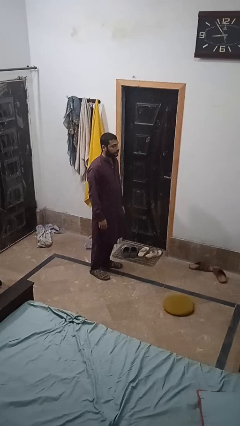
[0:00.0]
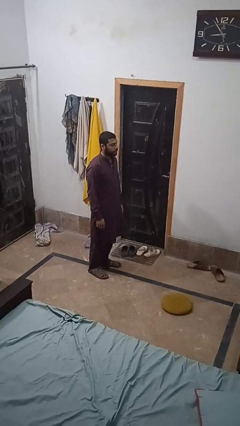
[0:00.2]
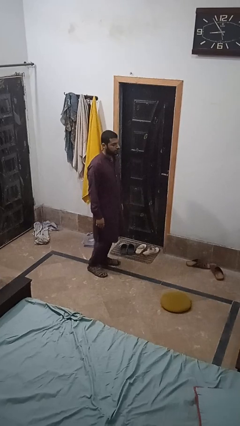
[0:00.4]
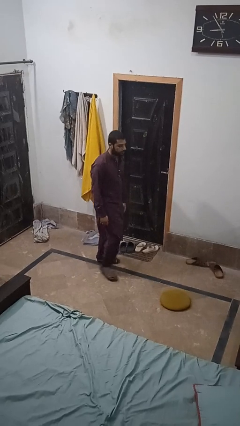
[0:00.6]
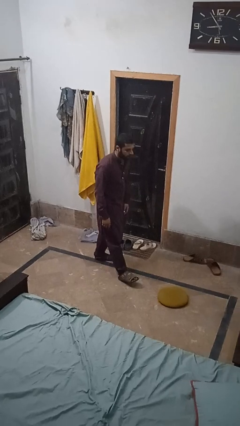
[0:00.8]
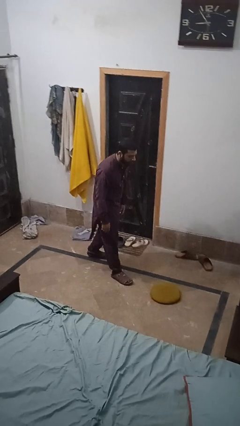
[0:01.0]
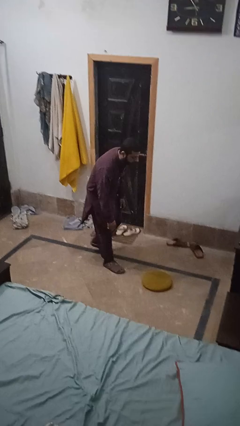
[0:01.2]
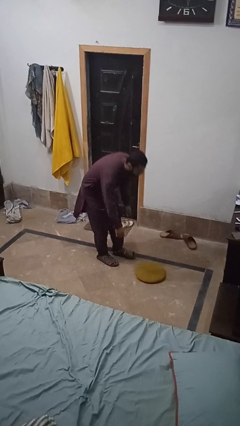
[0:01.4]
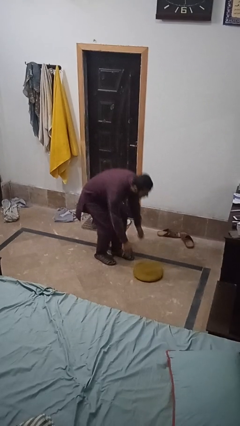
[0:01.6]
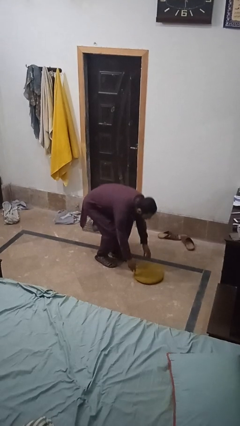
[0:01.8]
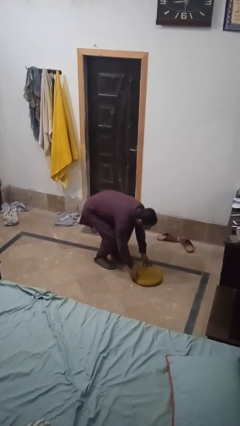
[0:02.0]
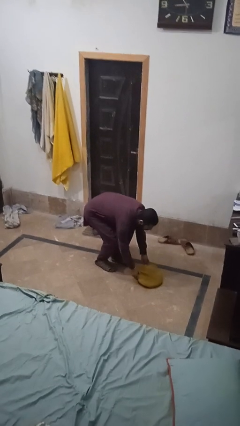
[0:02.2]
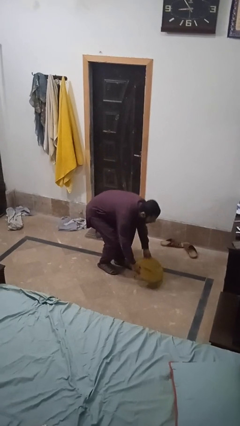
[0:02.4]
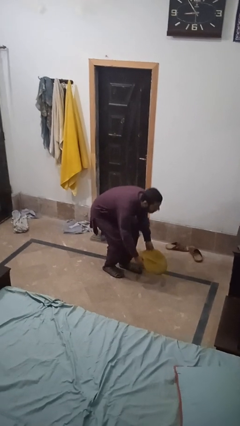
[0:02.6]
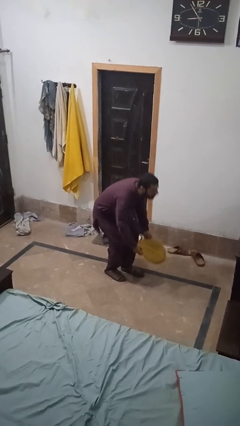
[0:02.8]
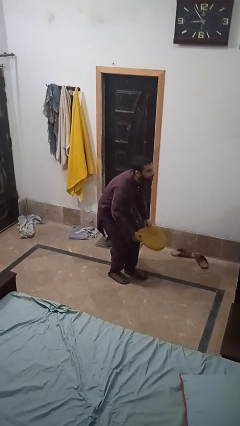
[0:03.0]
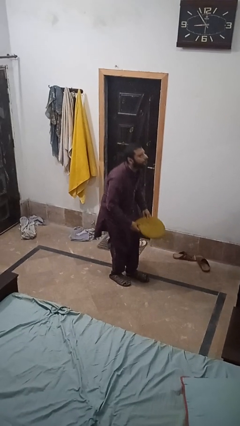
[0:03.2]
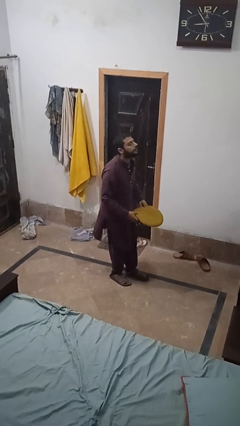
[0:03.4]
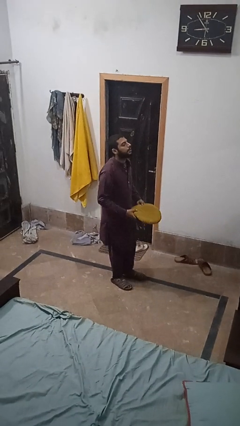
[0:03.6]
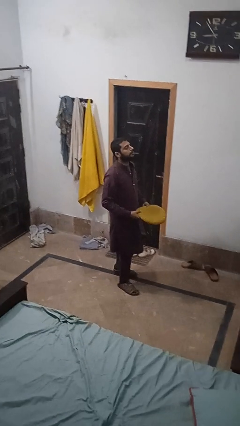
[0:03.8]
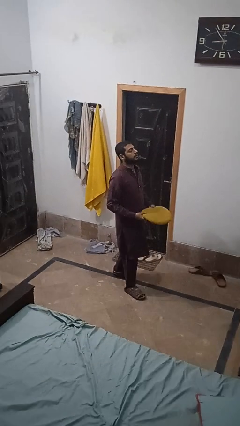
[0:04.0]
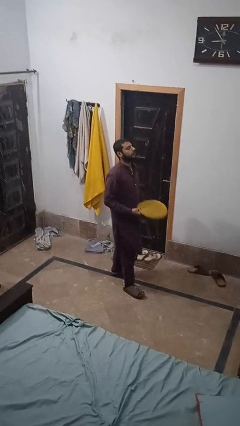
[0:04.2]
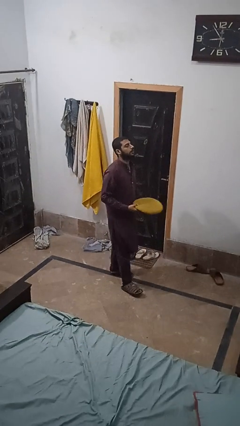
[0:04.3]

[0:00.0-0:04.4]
person picks up object from floor

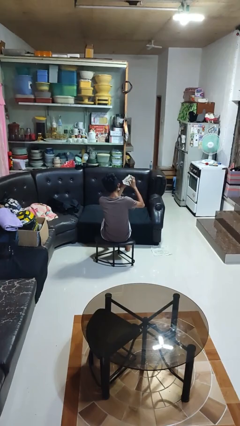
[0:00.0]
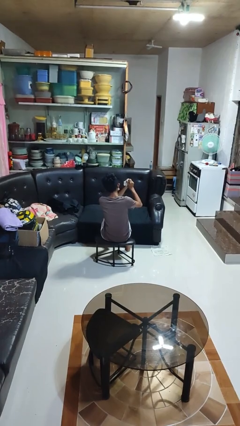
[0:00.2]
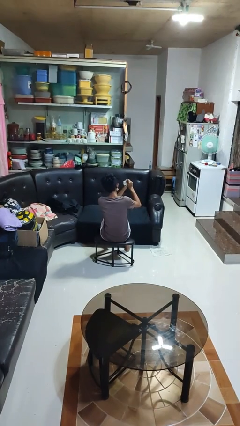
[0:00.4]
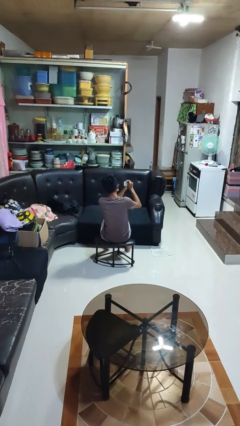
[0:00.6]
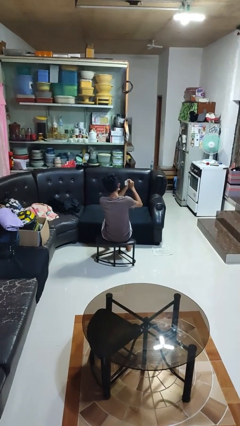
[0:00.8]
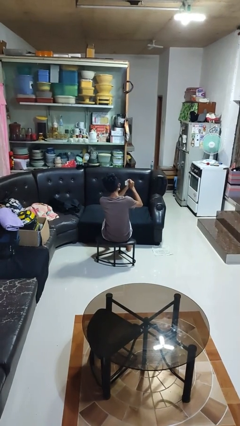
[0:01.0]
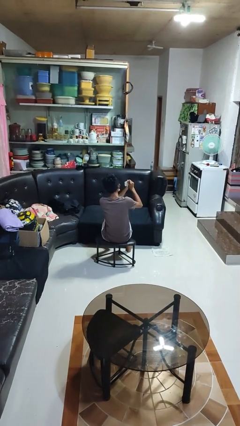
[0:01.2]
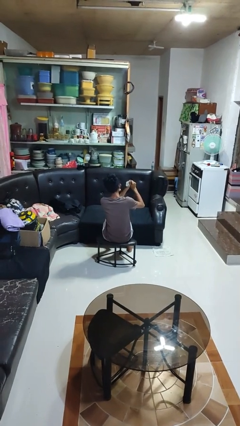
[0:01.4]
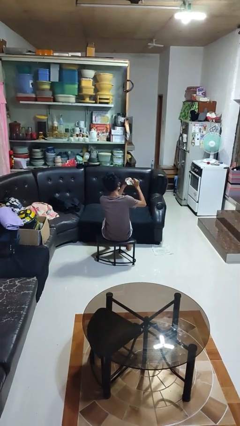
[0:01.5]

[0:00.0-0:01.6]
person crumples paper

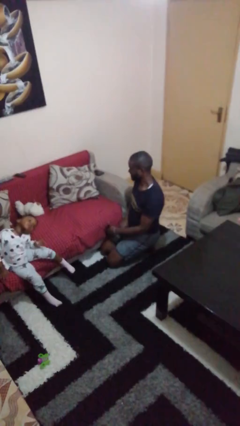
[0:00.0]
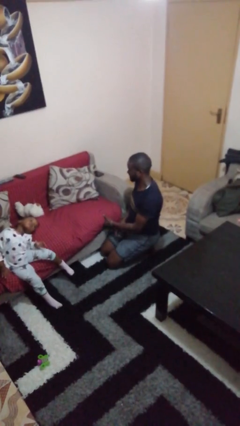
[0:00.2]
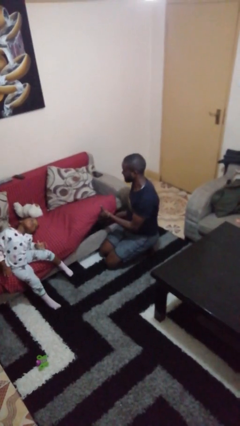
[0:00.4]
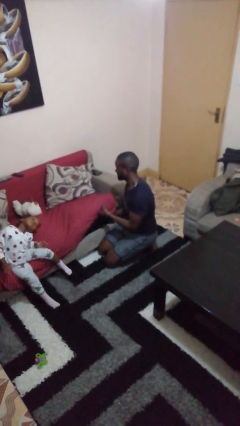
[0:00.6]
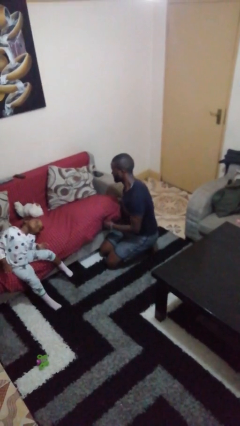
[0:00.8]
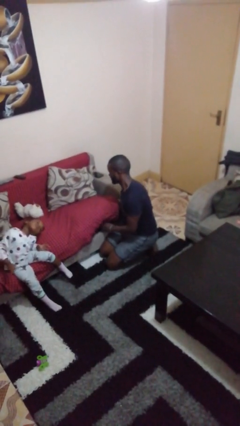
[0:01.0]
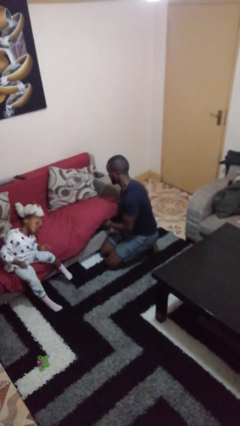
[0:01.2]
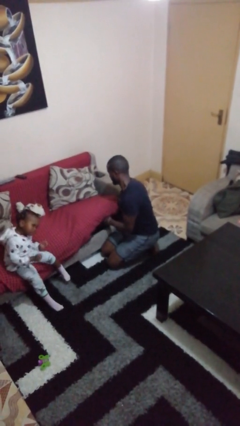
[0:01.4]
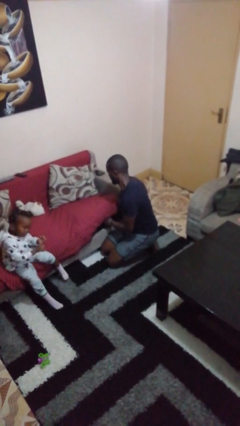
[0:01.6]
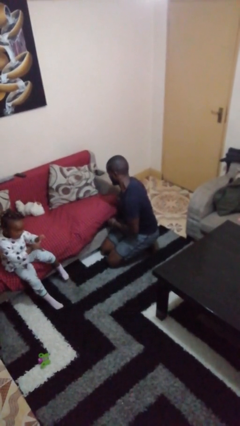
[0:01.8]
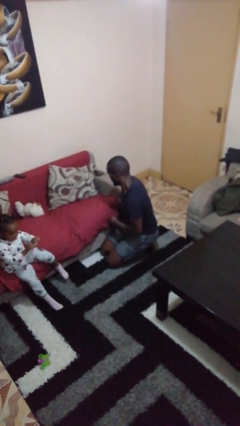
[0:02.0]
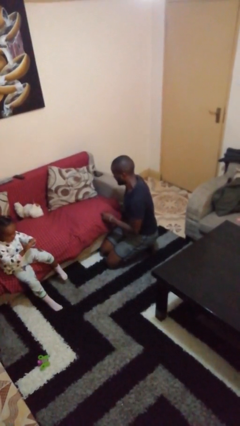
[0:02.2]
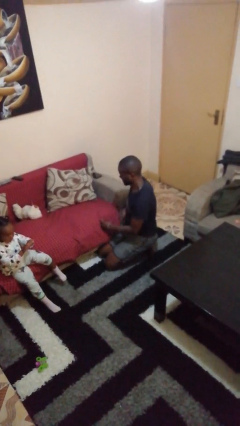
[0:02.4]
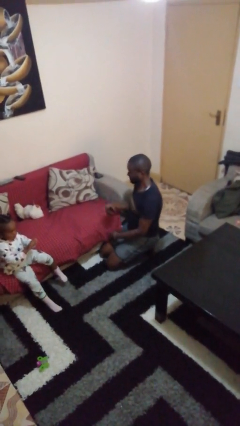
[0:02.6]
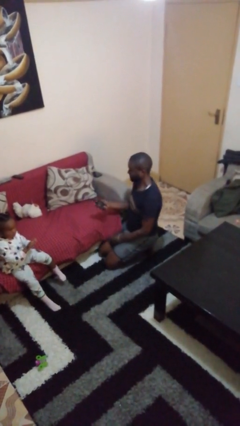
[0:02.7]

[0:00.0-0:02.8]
person searches in couch

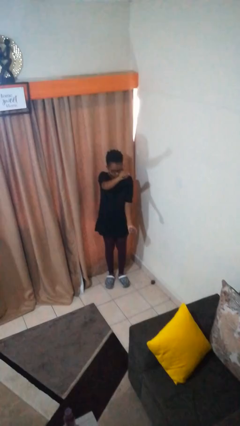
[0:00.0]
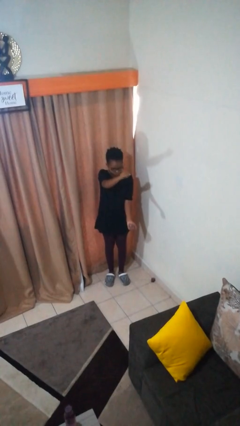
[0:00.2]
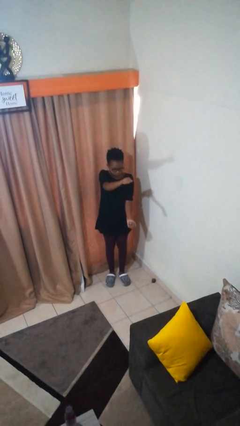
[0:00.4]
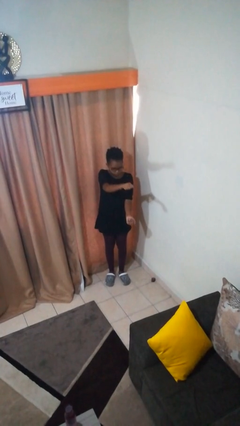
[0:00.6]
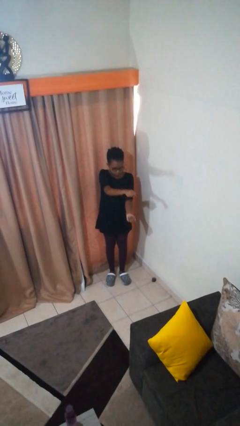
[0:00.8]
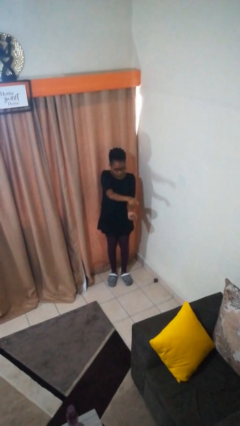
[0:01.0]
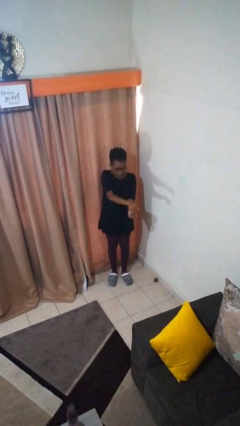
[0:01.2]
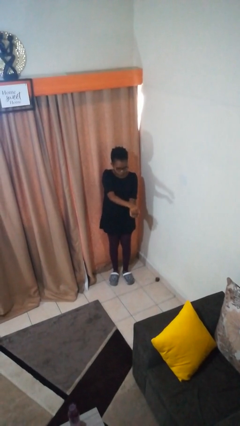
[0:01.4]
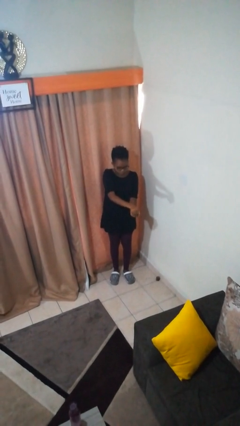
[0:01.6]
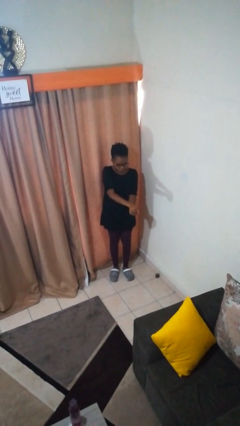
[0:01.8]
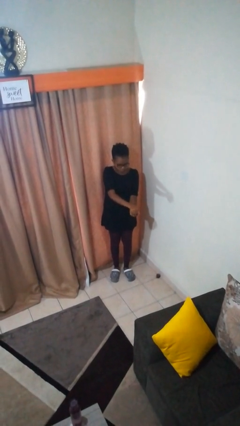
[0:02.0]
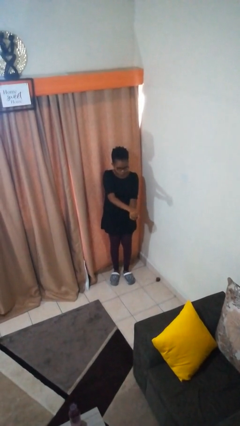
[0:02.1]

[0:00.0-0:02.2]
person gestures zoom out

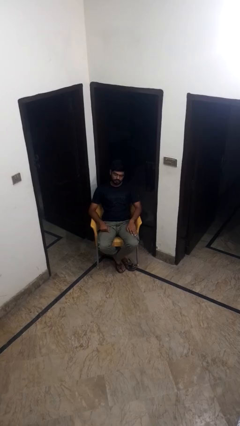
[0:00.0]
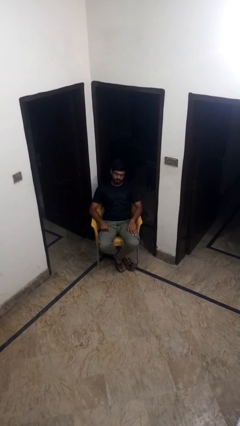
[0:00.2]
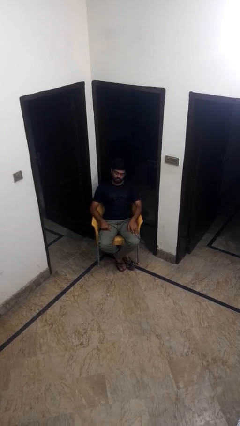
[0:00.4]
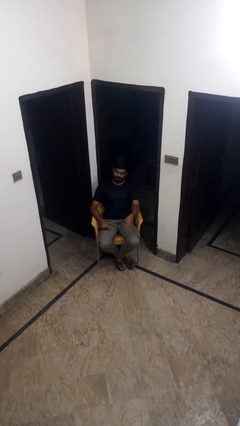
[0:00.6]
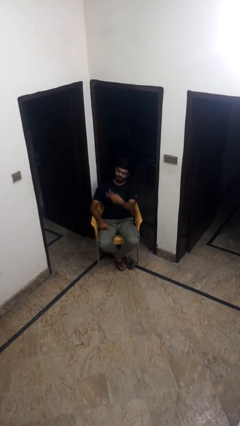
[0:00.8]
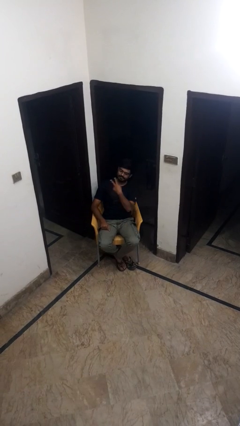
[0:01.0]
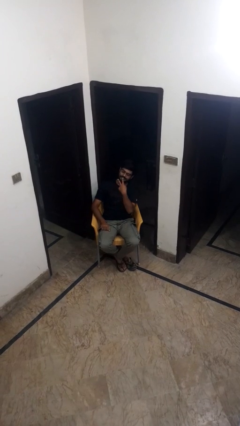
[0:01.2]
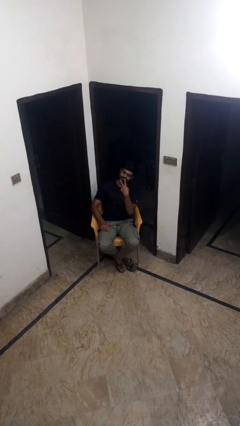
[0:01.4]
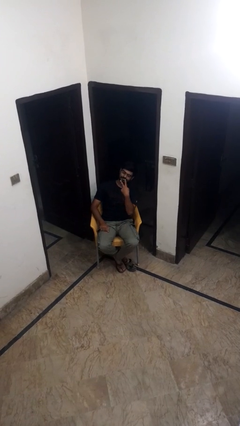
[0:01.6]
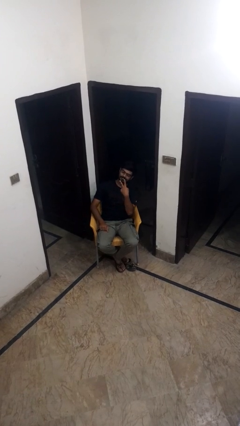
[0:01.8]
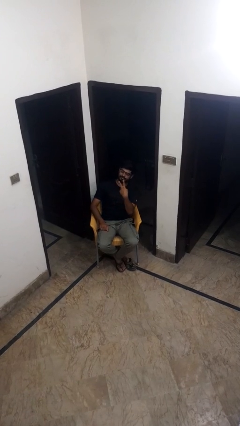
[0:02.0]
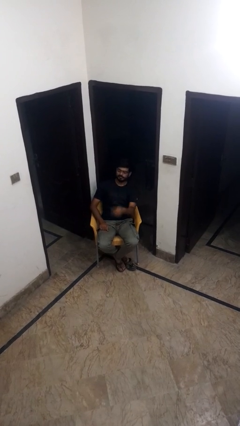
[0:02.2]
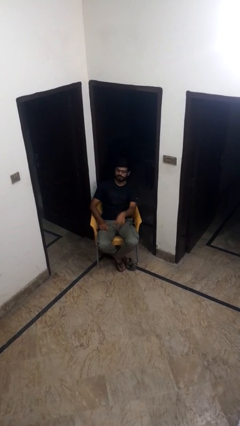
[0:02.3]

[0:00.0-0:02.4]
person gestures peace

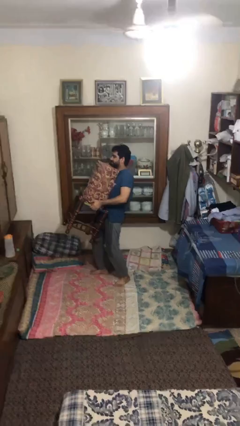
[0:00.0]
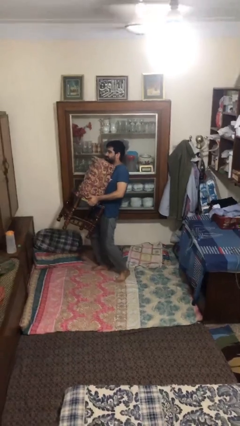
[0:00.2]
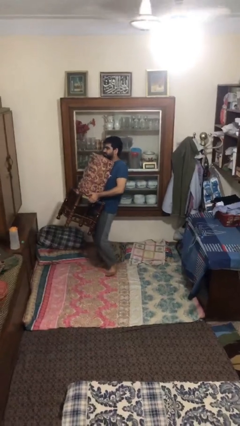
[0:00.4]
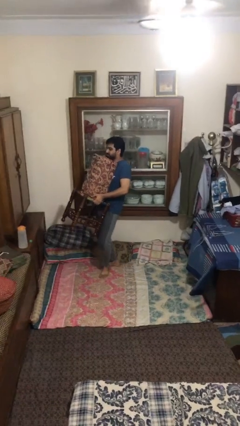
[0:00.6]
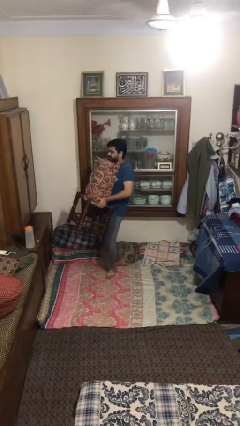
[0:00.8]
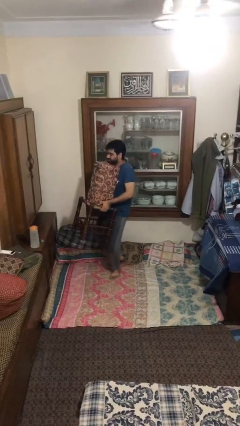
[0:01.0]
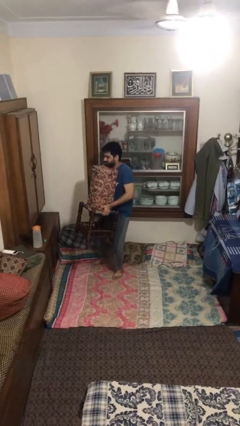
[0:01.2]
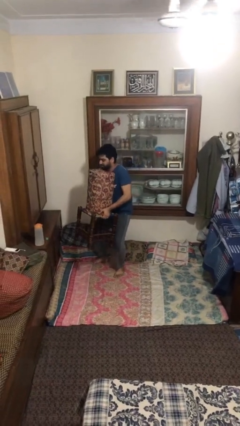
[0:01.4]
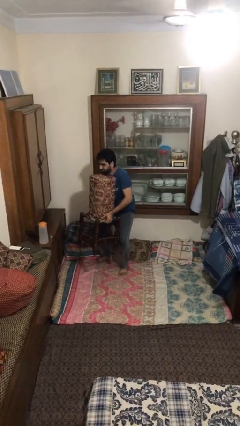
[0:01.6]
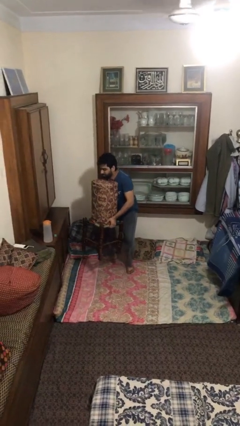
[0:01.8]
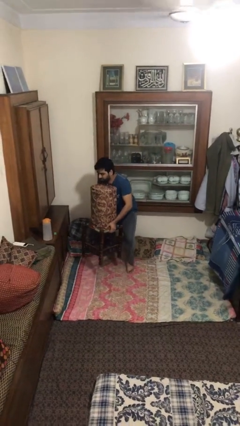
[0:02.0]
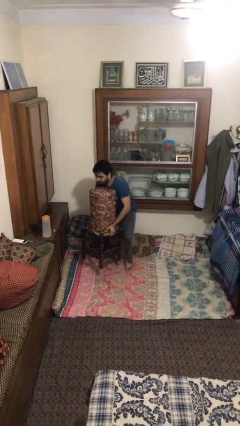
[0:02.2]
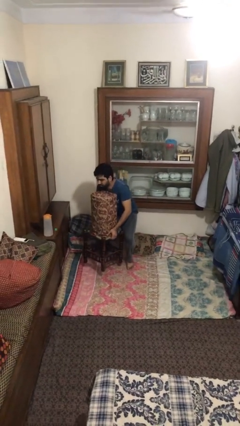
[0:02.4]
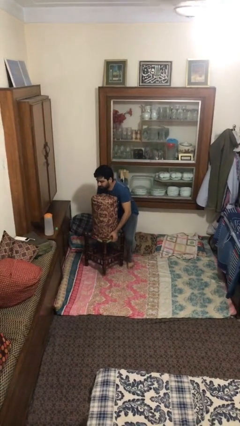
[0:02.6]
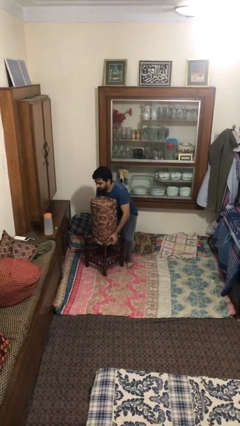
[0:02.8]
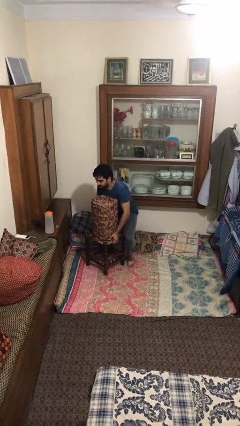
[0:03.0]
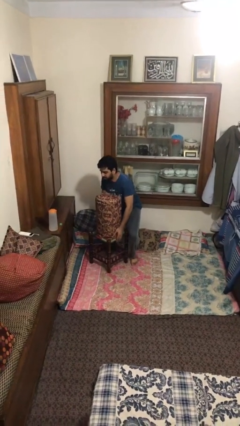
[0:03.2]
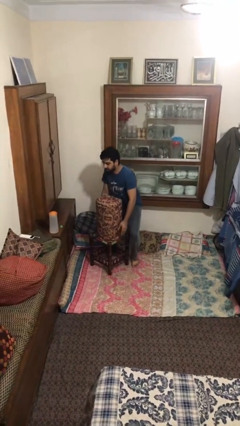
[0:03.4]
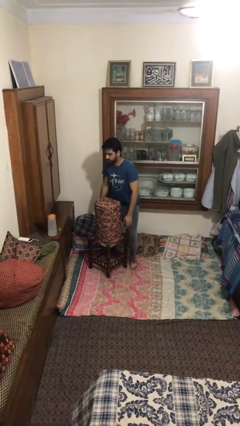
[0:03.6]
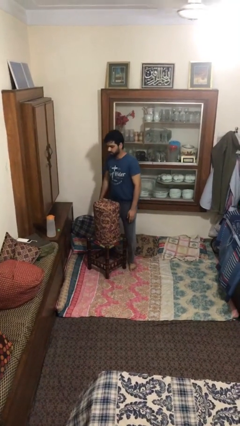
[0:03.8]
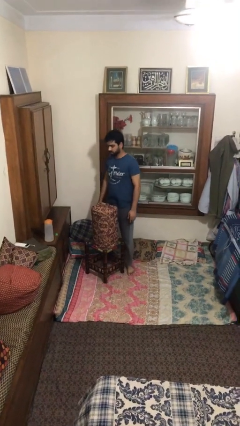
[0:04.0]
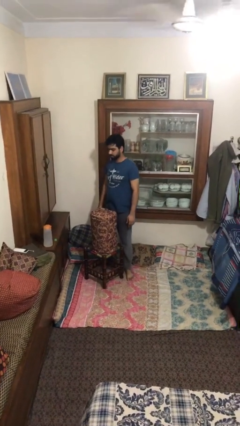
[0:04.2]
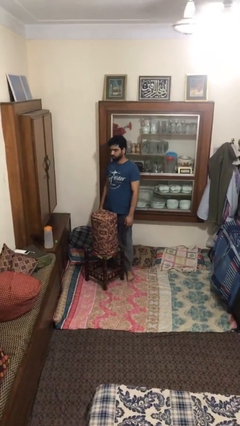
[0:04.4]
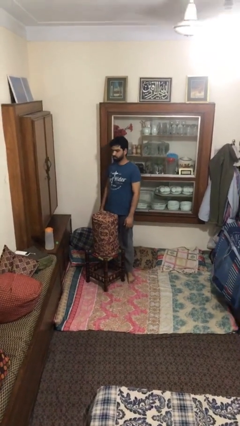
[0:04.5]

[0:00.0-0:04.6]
person puts down object on floor
